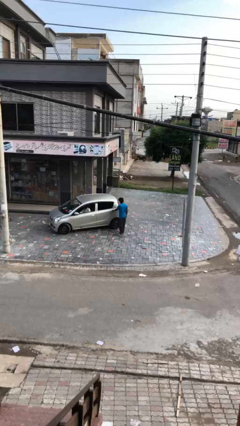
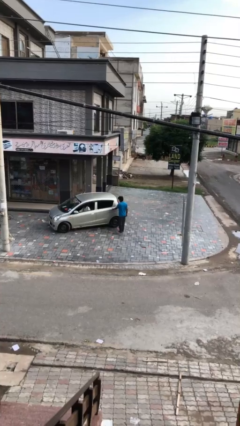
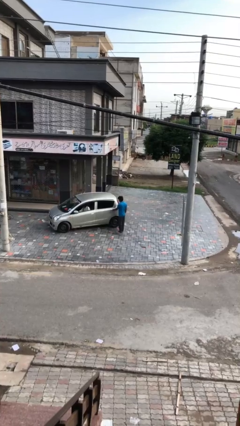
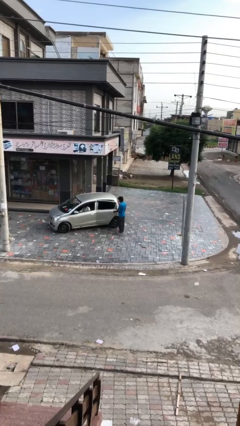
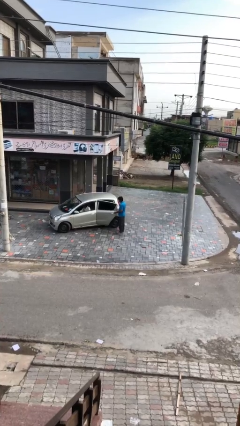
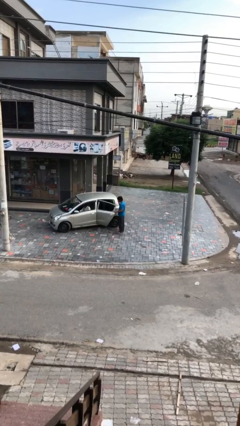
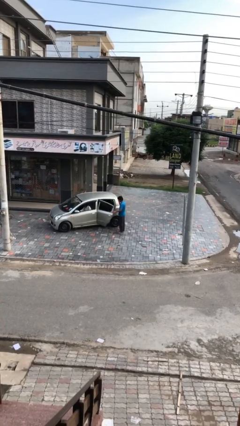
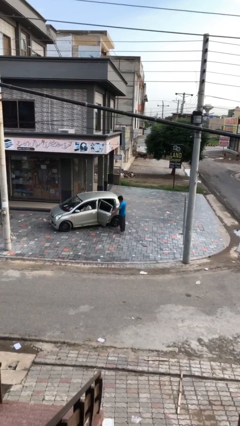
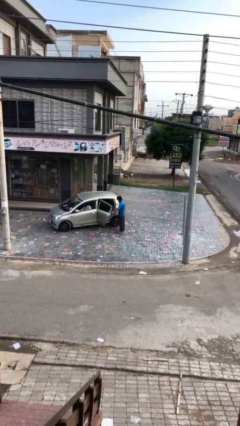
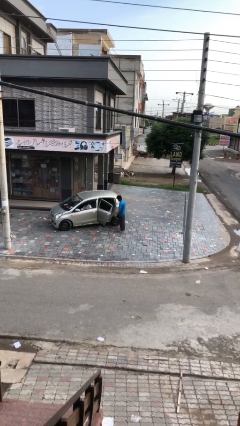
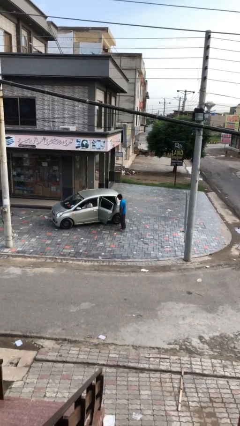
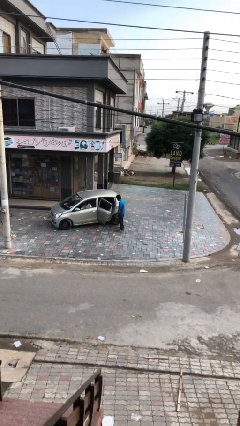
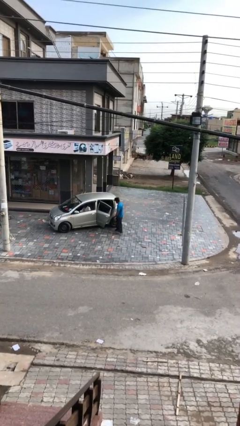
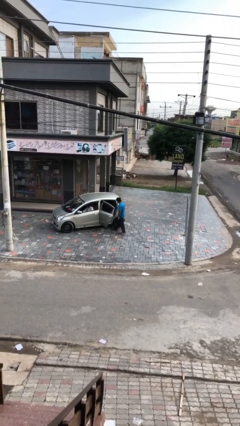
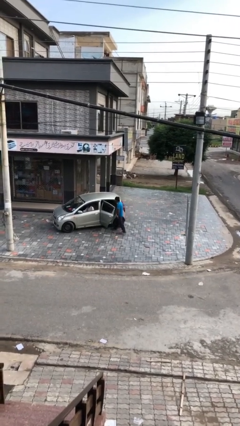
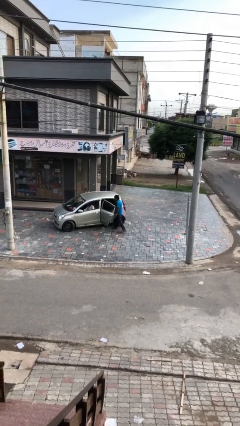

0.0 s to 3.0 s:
person opens car door

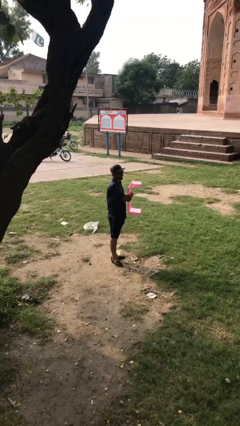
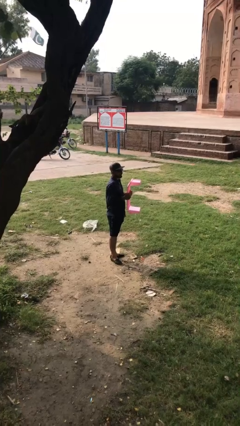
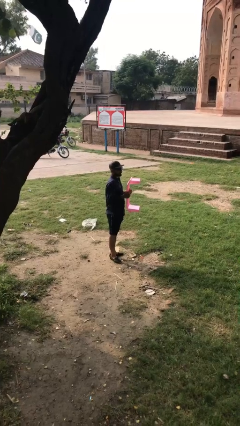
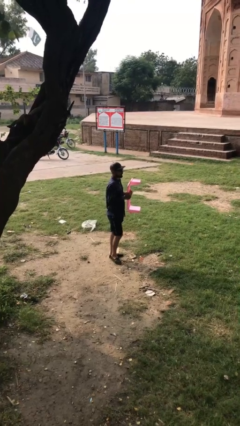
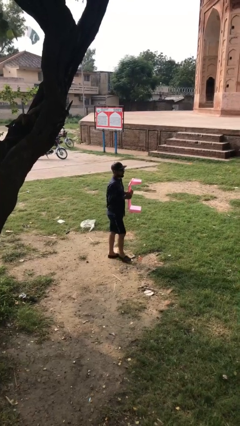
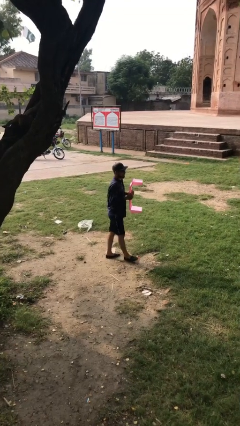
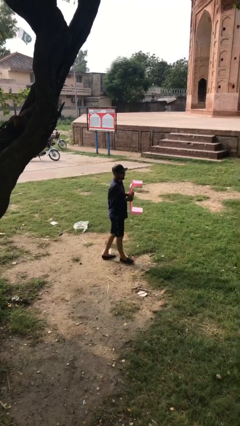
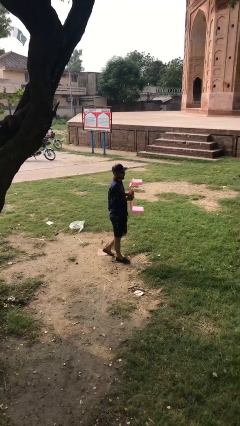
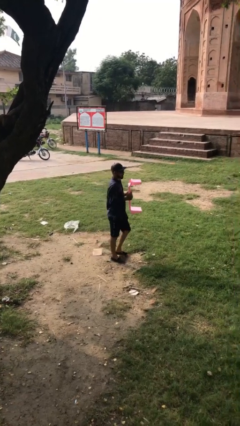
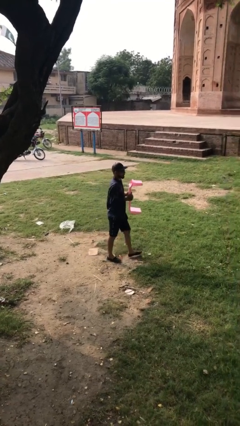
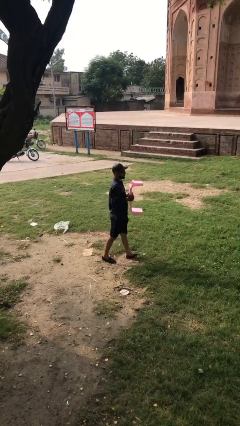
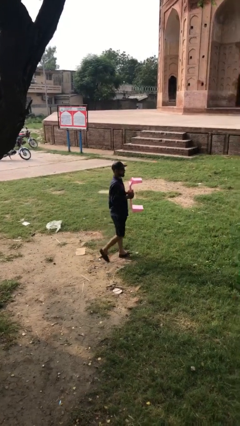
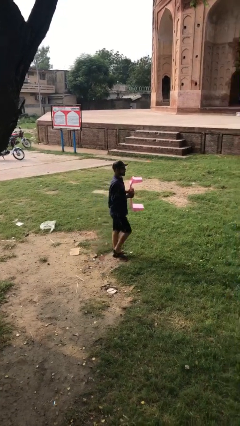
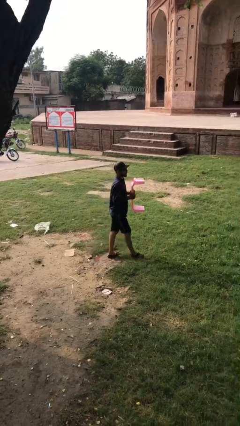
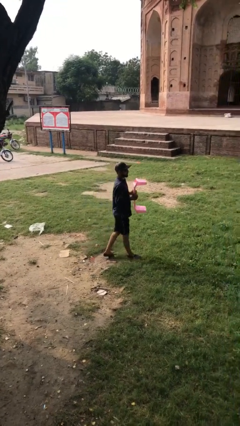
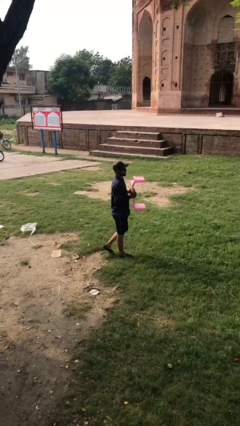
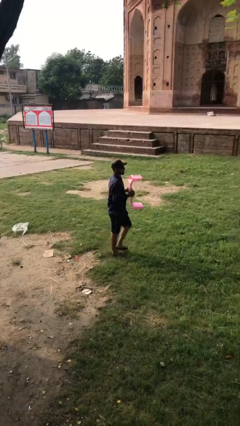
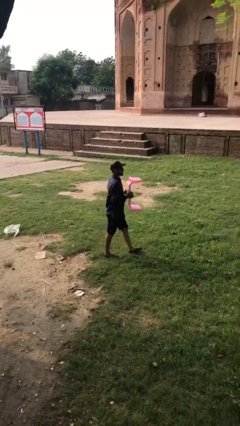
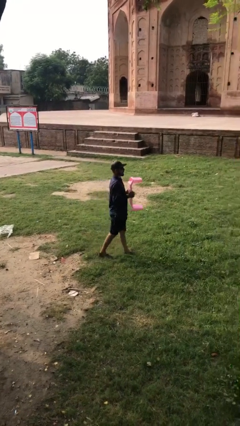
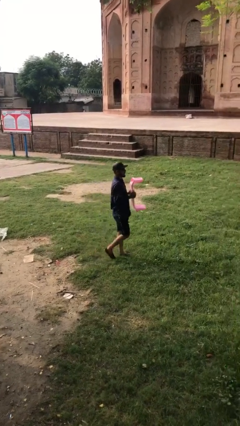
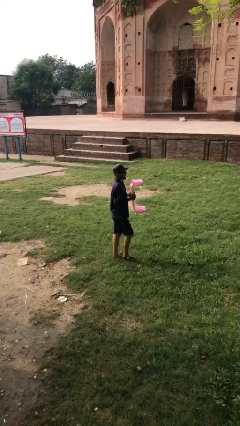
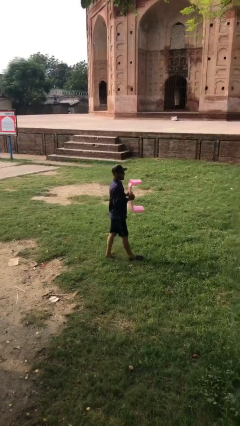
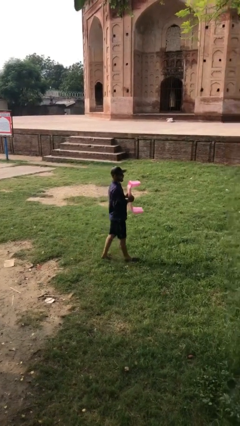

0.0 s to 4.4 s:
person carries heavy object

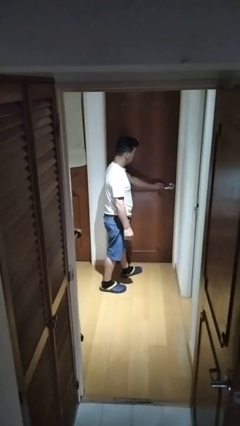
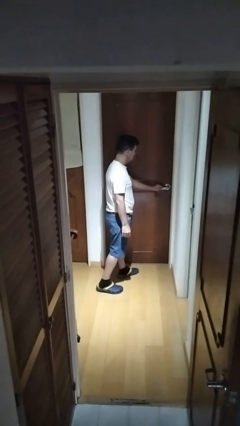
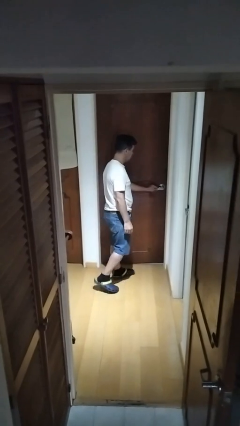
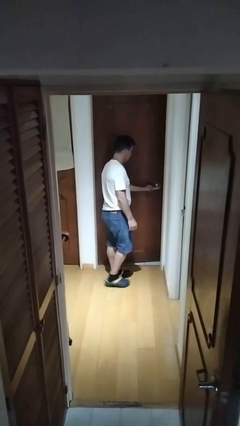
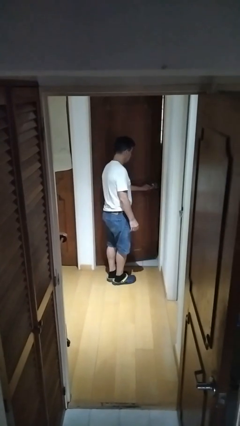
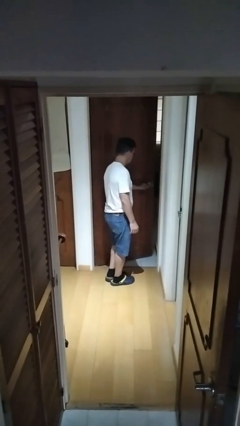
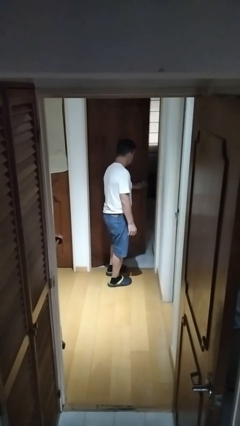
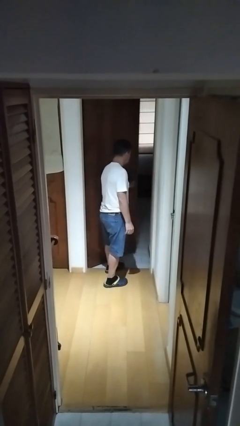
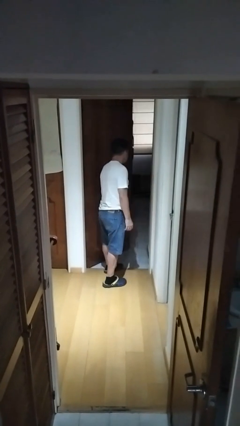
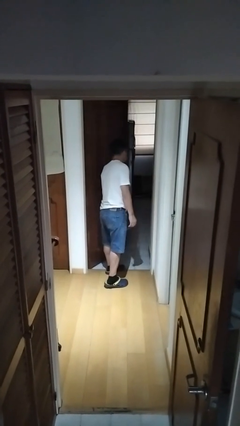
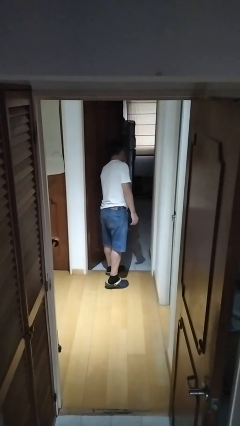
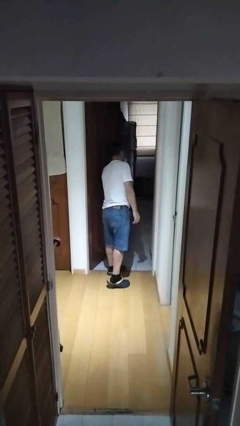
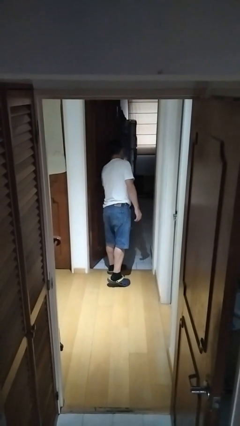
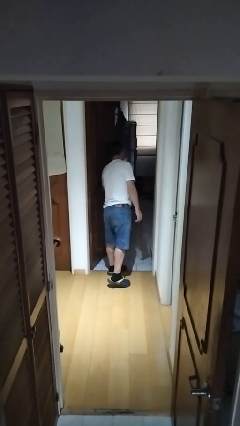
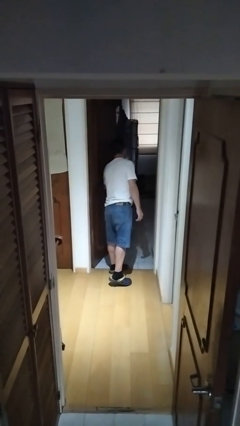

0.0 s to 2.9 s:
person opens facility door

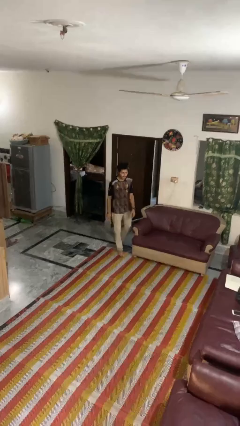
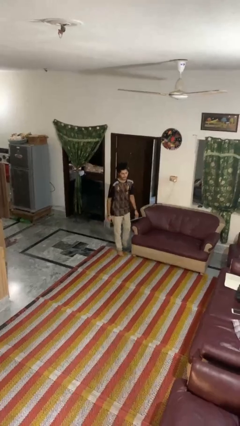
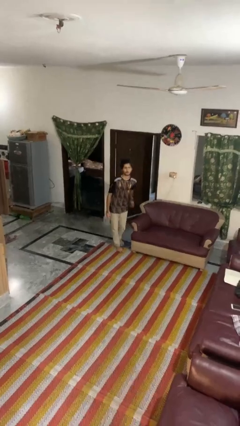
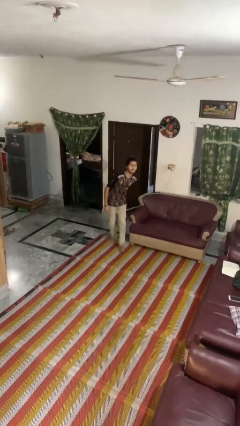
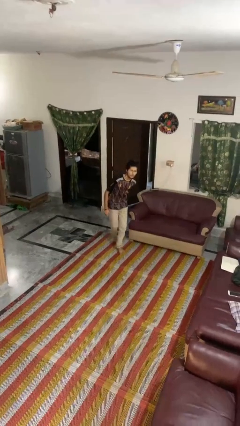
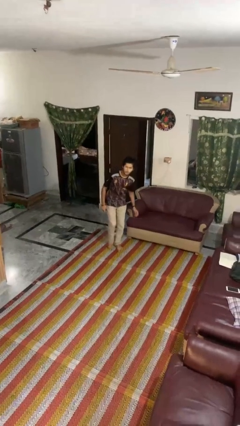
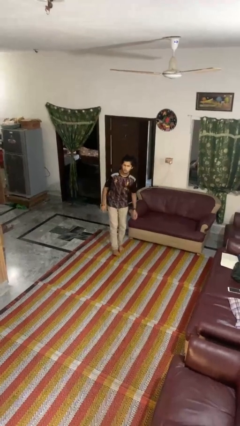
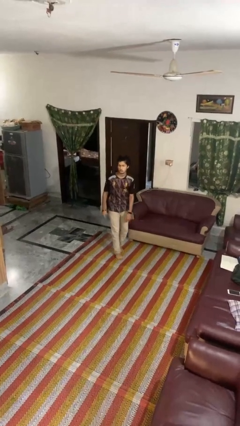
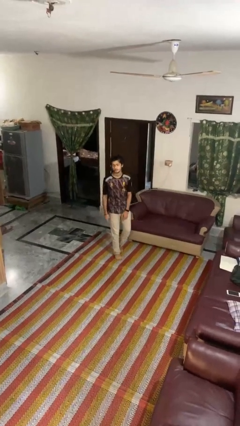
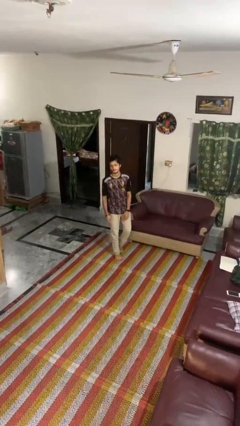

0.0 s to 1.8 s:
person stubs toe

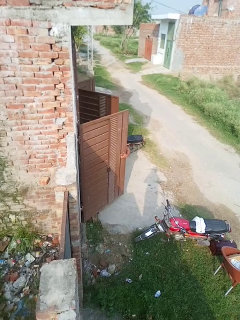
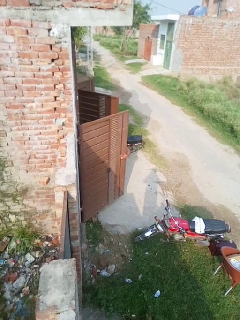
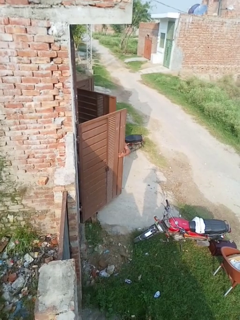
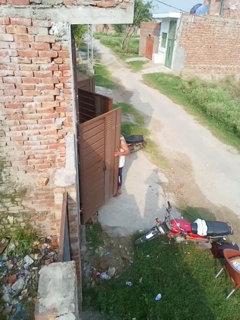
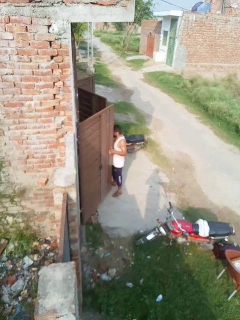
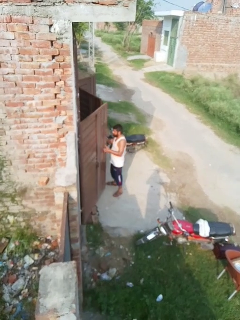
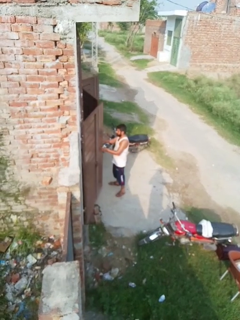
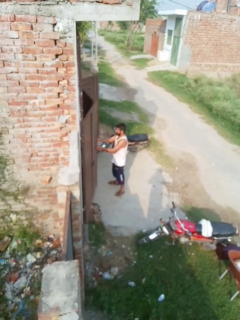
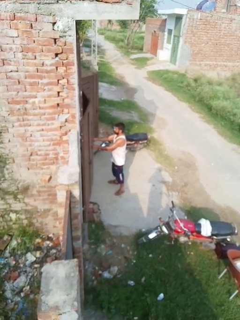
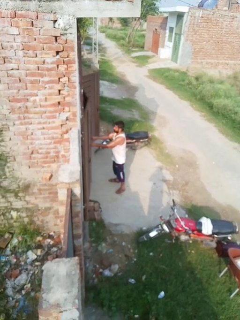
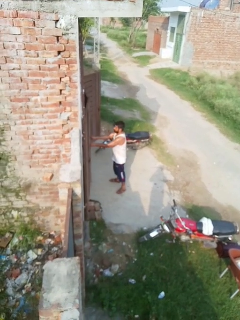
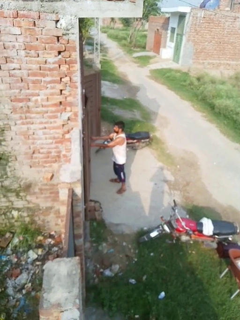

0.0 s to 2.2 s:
person closes gate

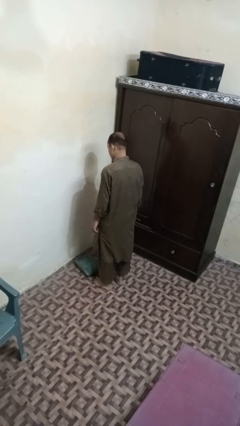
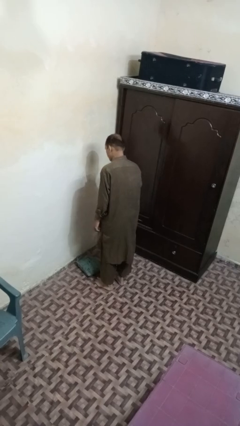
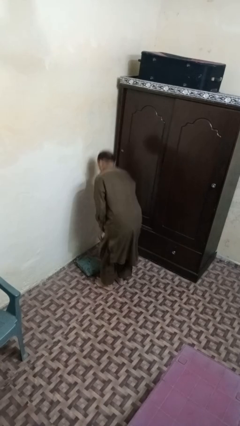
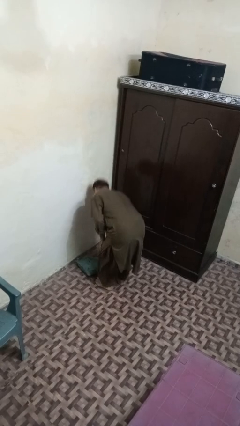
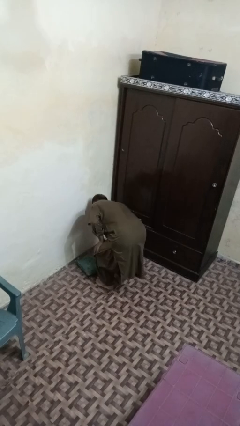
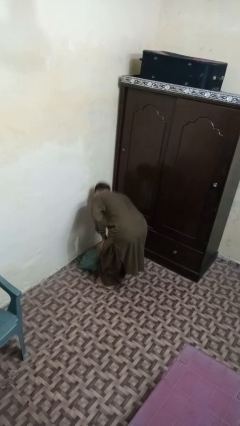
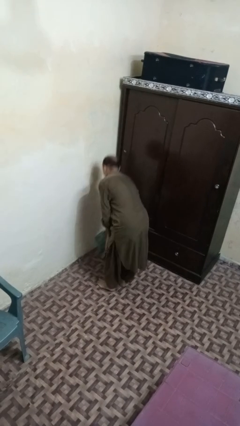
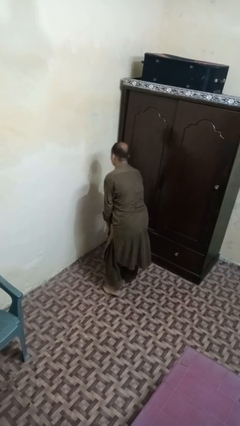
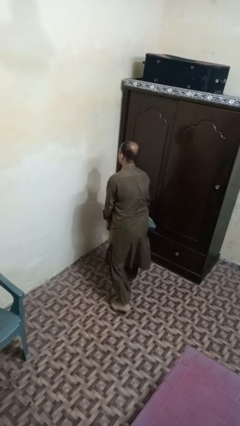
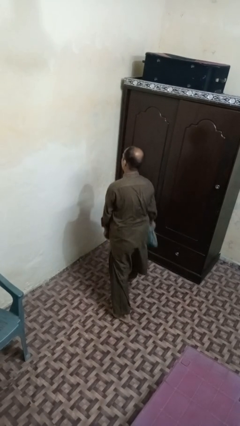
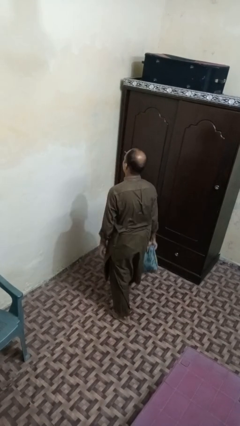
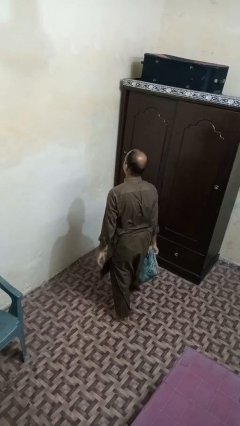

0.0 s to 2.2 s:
person picks up object from floor

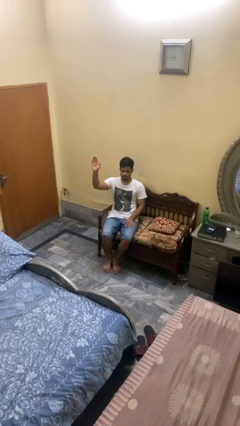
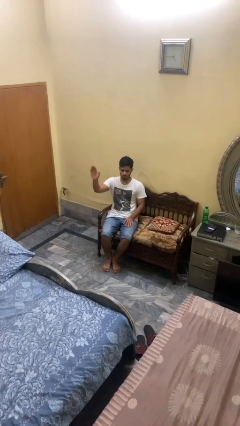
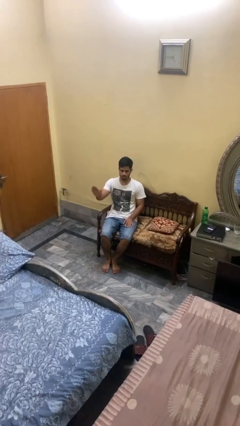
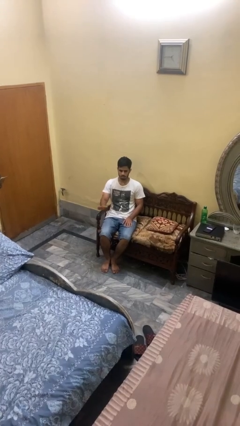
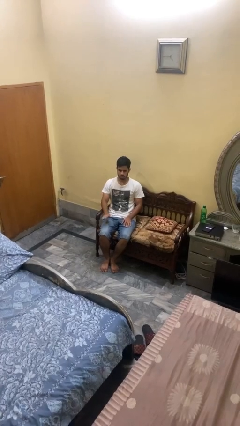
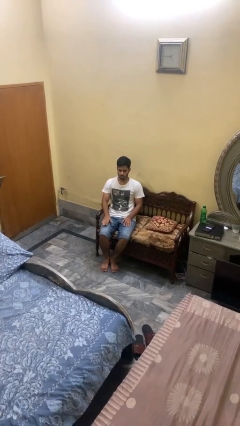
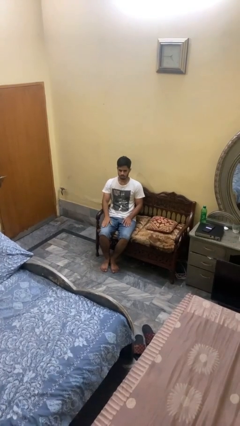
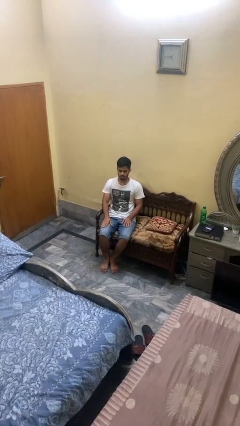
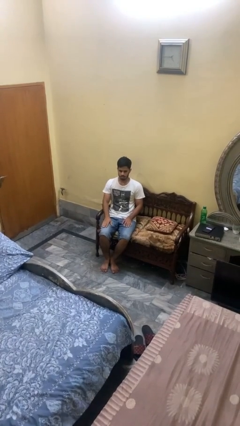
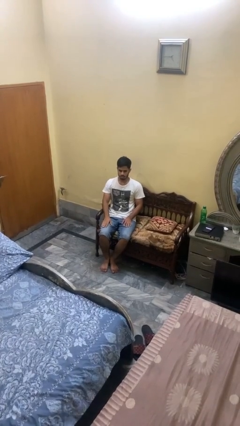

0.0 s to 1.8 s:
person gestures lower hand
